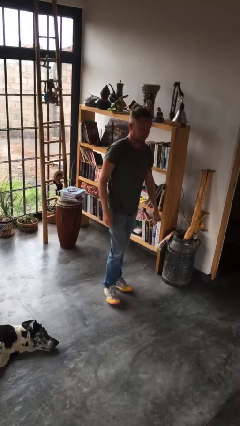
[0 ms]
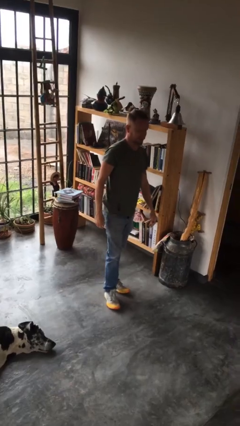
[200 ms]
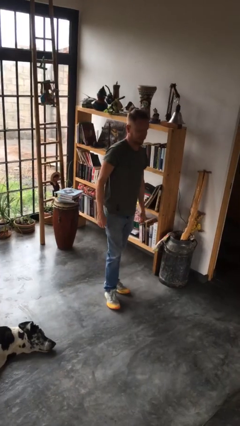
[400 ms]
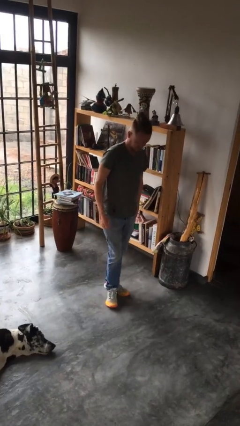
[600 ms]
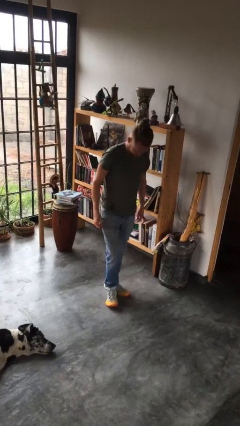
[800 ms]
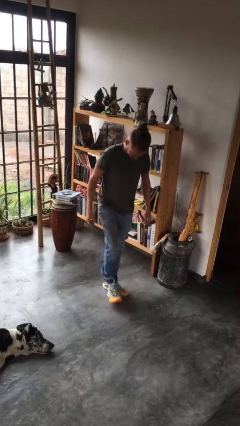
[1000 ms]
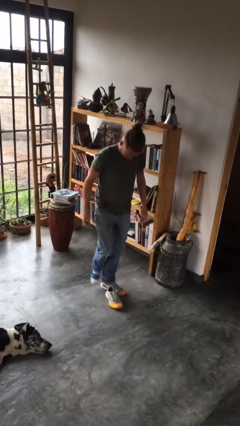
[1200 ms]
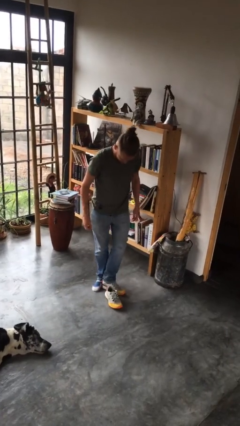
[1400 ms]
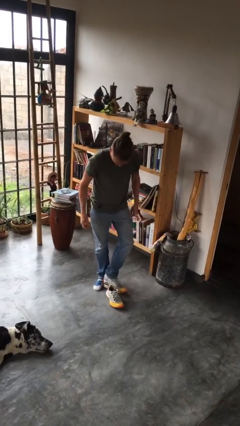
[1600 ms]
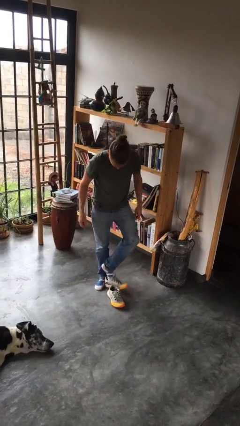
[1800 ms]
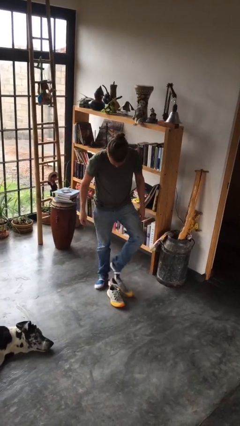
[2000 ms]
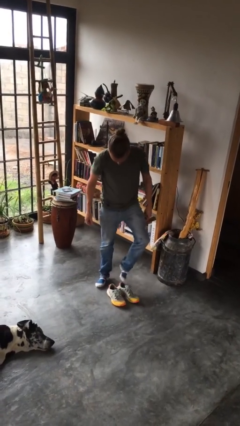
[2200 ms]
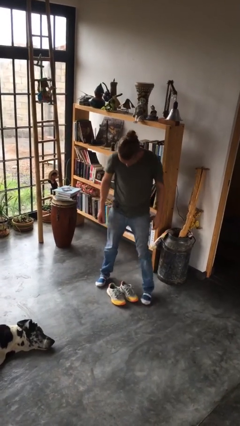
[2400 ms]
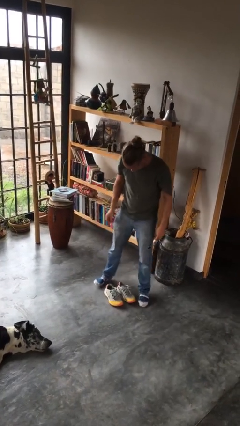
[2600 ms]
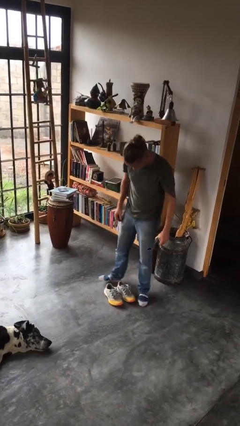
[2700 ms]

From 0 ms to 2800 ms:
person takes off shoes

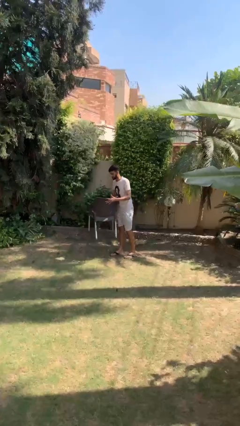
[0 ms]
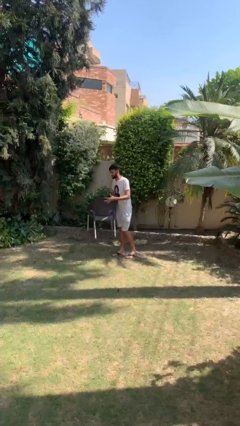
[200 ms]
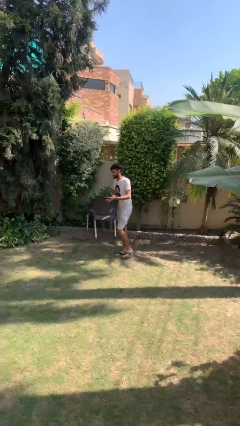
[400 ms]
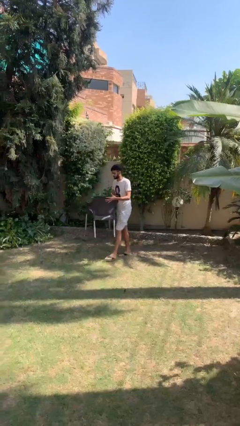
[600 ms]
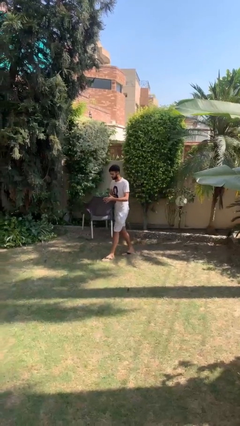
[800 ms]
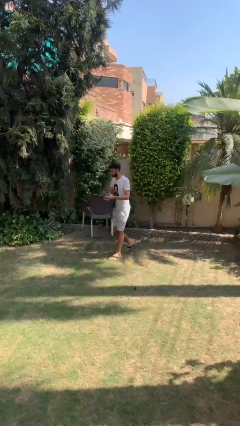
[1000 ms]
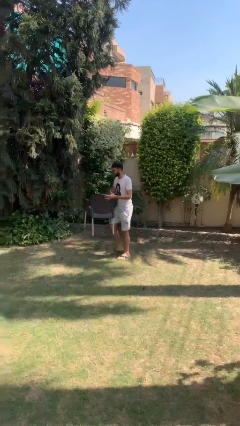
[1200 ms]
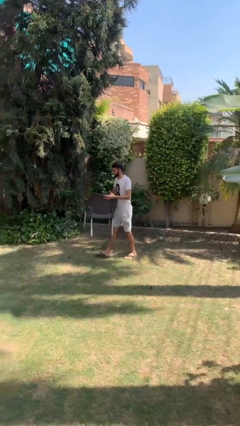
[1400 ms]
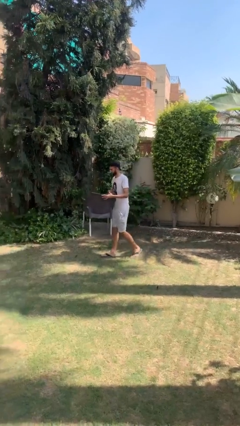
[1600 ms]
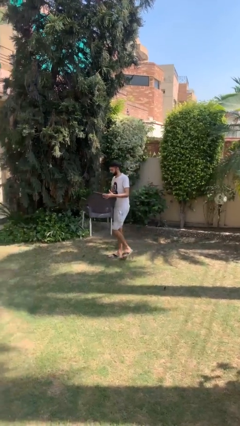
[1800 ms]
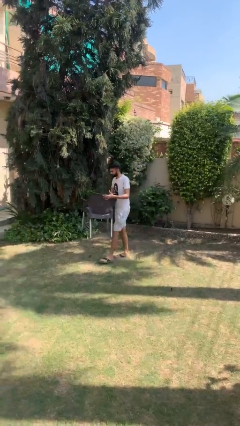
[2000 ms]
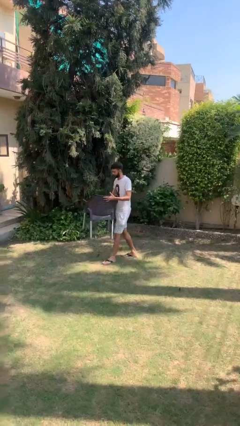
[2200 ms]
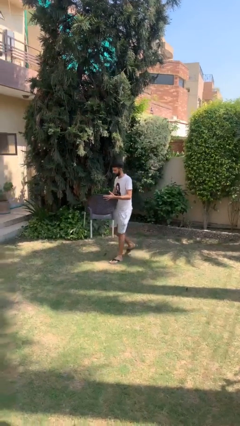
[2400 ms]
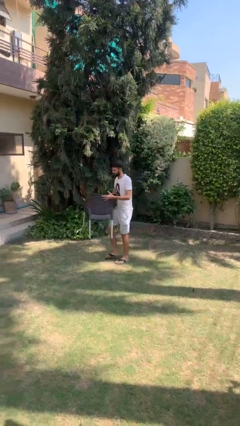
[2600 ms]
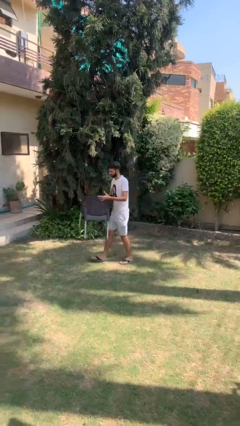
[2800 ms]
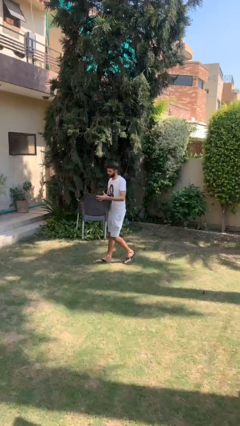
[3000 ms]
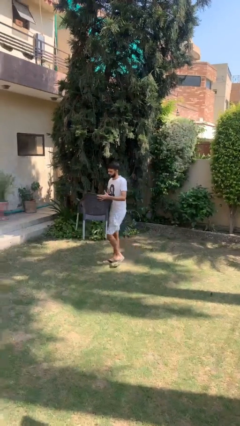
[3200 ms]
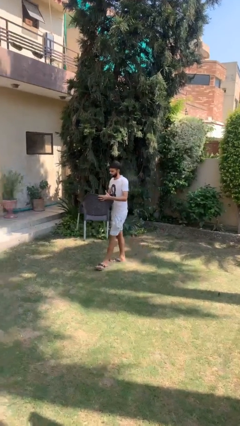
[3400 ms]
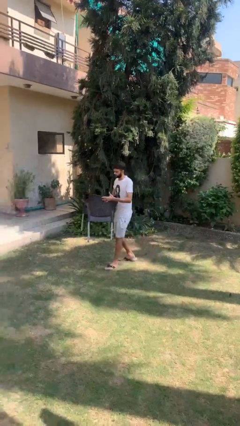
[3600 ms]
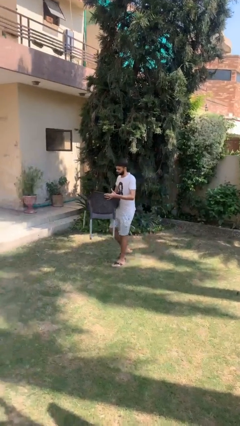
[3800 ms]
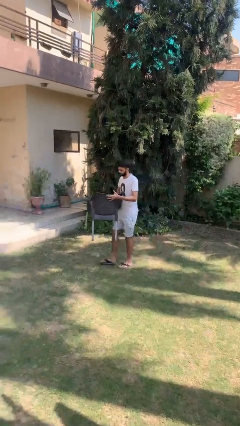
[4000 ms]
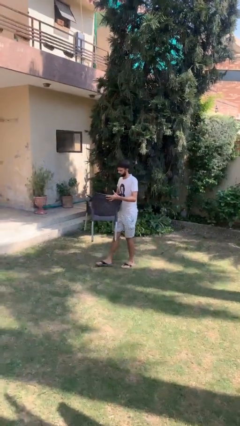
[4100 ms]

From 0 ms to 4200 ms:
person carries heavy object

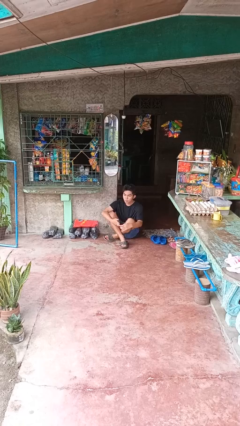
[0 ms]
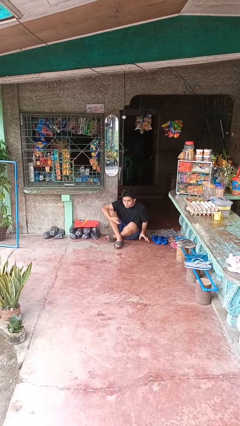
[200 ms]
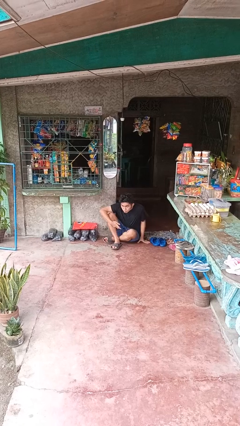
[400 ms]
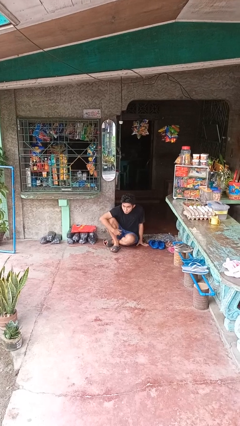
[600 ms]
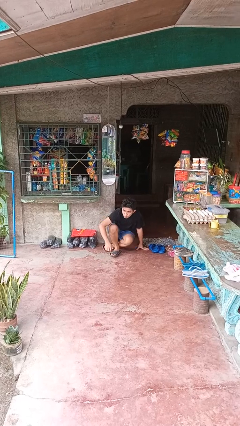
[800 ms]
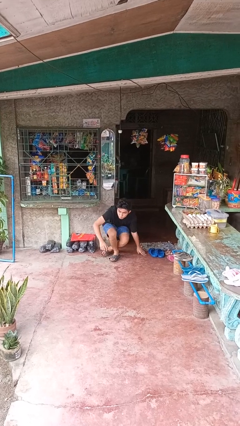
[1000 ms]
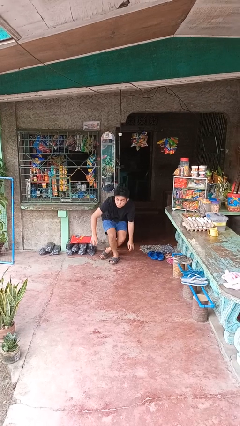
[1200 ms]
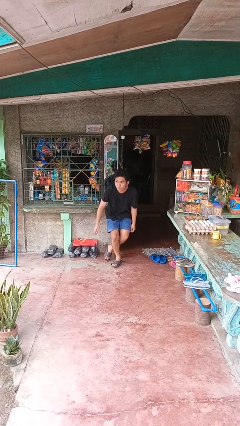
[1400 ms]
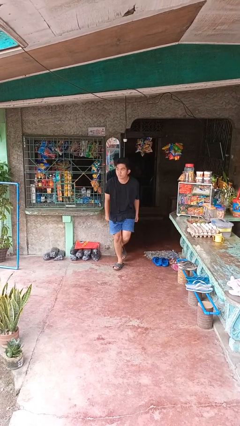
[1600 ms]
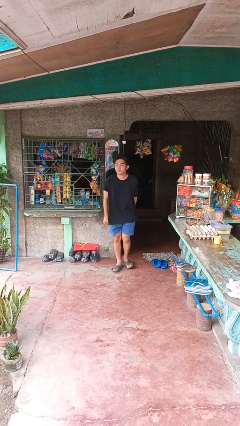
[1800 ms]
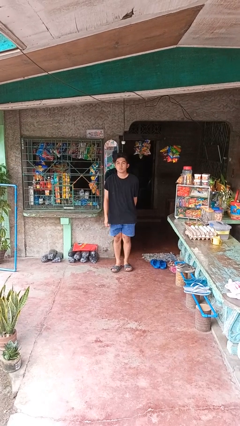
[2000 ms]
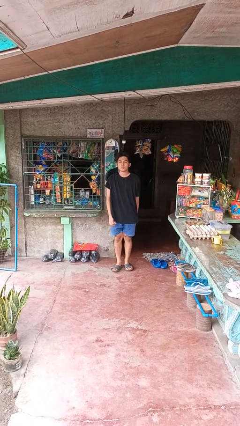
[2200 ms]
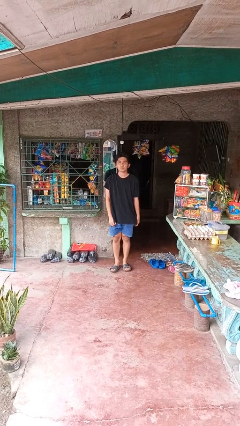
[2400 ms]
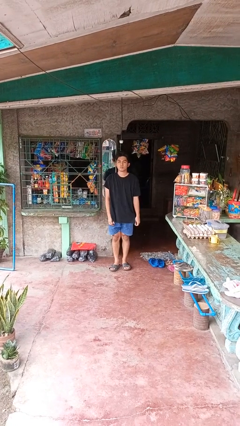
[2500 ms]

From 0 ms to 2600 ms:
person stands up from floor

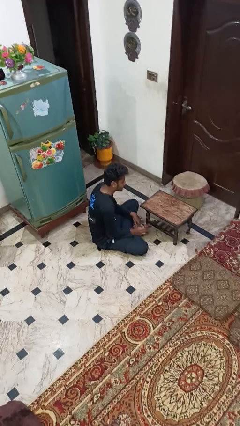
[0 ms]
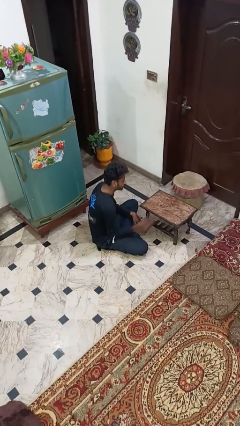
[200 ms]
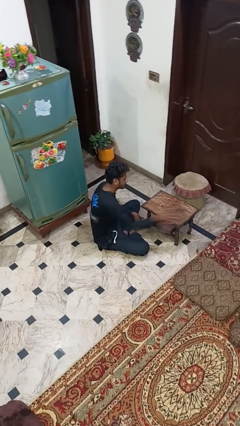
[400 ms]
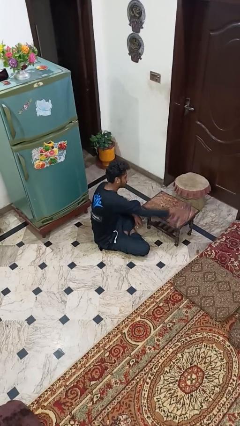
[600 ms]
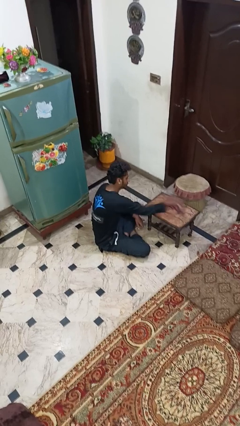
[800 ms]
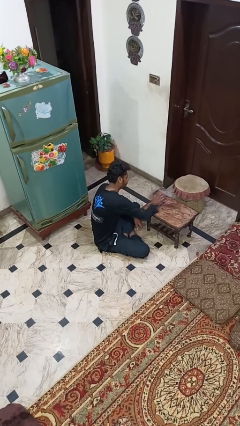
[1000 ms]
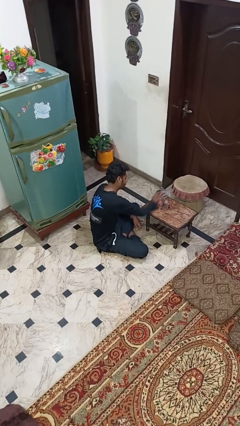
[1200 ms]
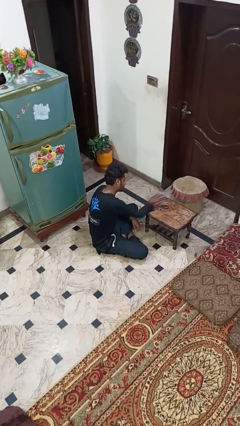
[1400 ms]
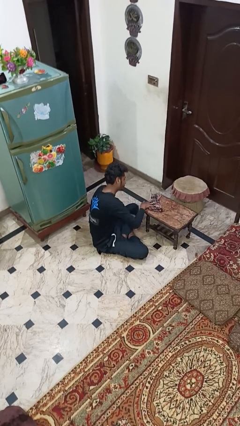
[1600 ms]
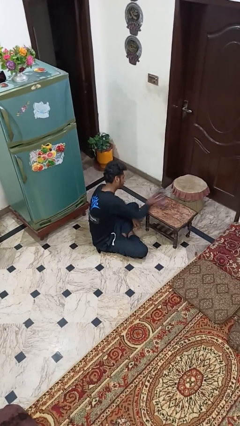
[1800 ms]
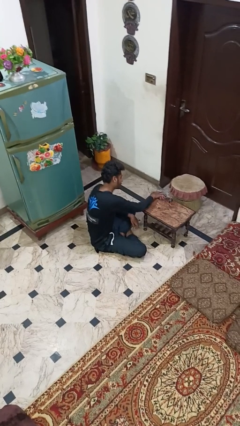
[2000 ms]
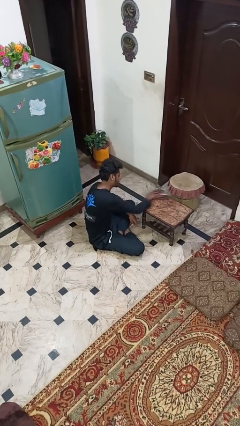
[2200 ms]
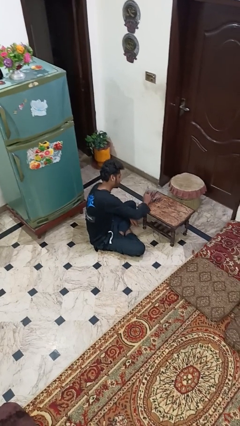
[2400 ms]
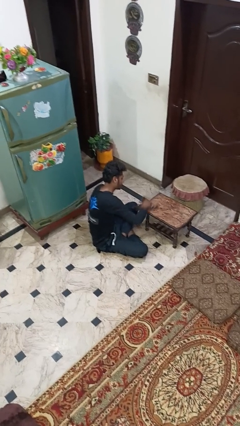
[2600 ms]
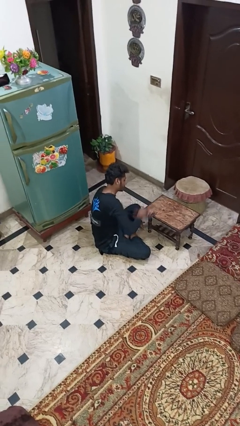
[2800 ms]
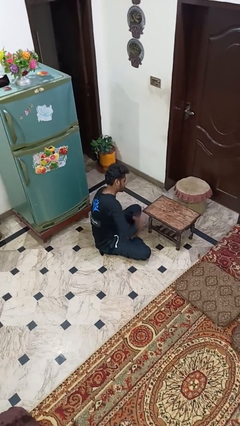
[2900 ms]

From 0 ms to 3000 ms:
person cleans table with rag

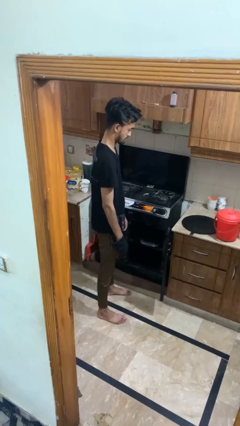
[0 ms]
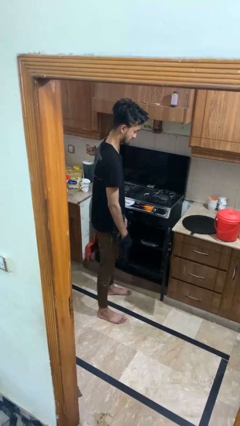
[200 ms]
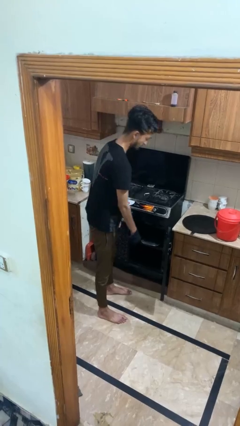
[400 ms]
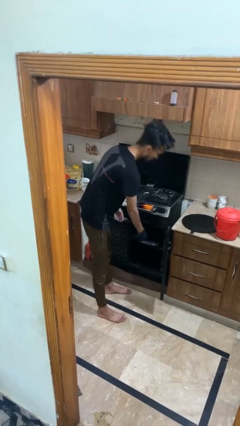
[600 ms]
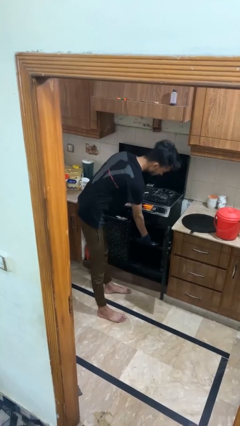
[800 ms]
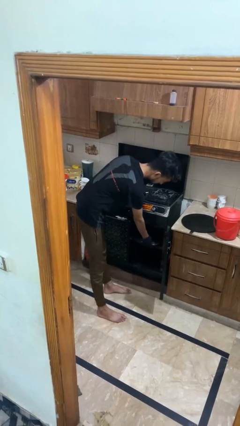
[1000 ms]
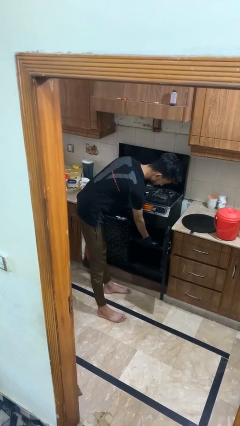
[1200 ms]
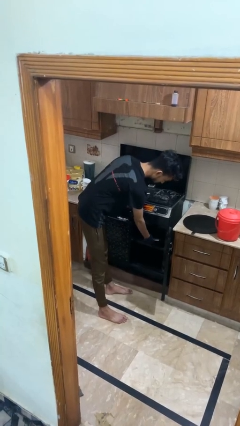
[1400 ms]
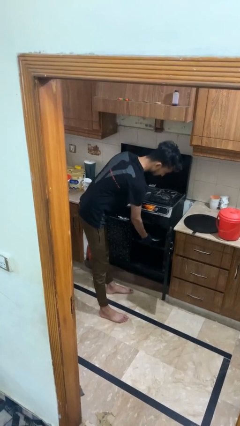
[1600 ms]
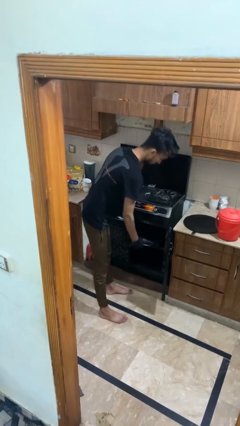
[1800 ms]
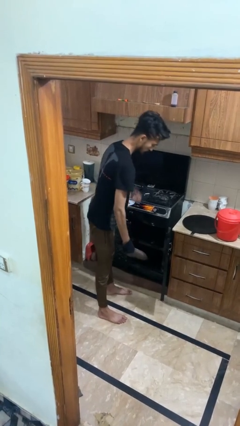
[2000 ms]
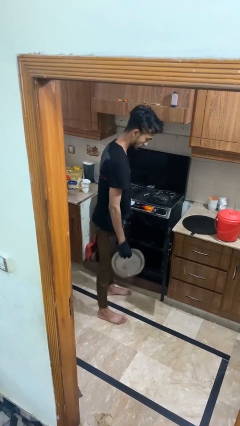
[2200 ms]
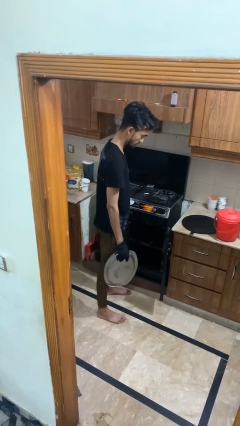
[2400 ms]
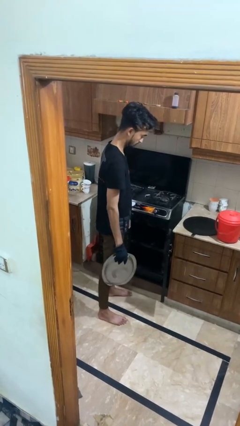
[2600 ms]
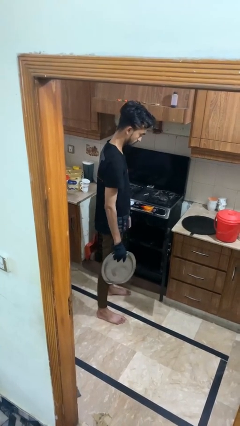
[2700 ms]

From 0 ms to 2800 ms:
person takes object from oven

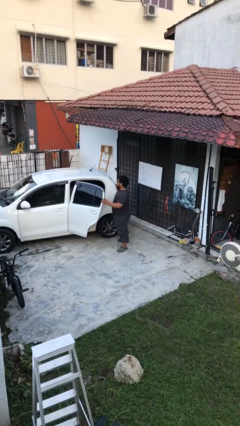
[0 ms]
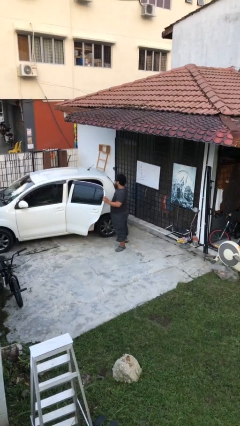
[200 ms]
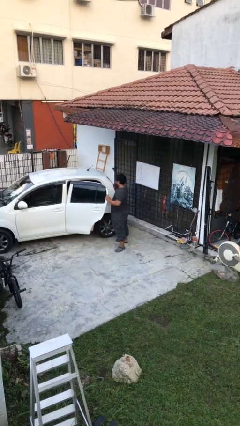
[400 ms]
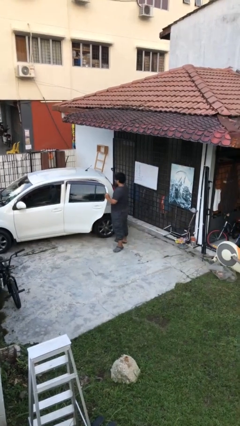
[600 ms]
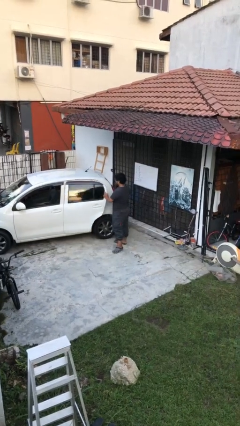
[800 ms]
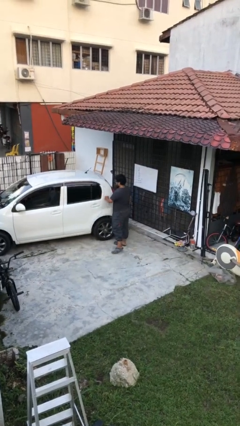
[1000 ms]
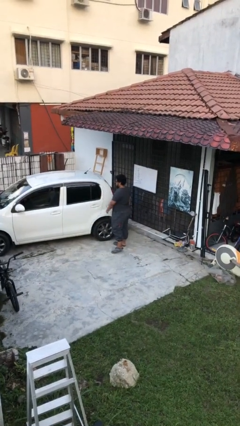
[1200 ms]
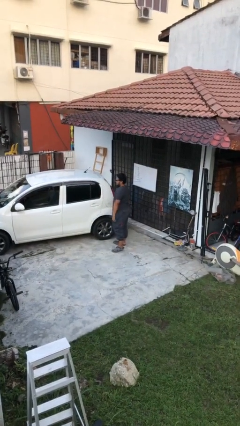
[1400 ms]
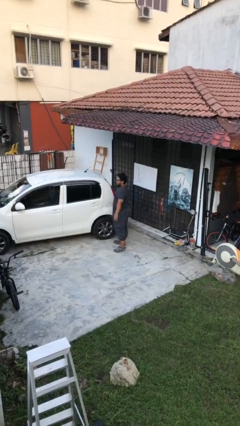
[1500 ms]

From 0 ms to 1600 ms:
person closes car door

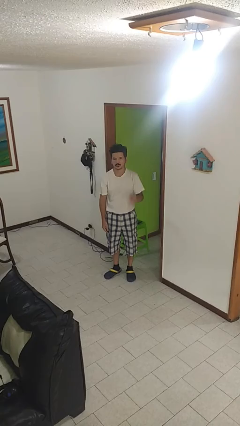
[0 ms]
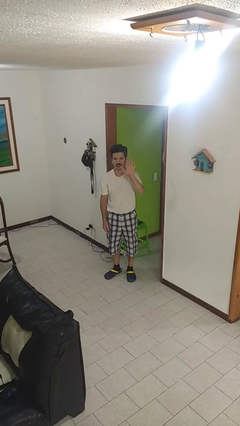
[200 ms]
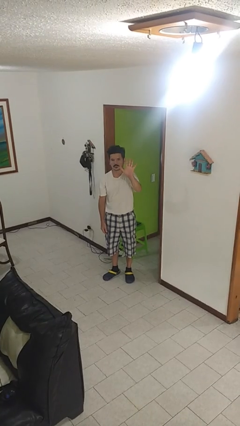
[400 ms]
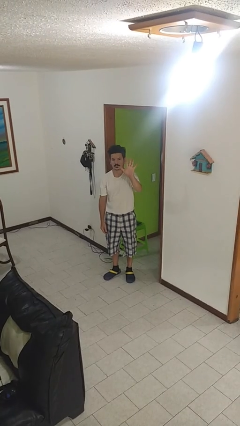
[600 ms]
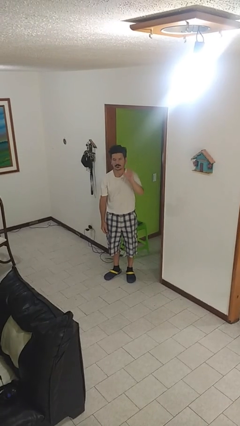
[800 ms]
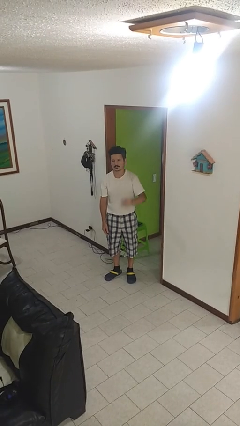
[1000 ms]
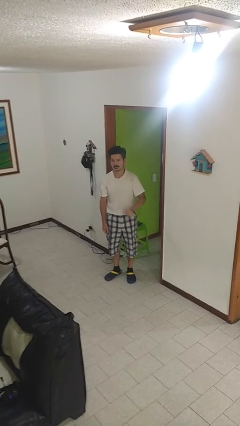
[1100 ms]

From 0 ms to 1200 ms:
person gestures number five
